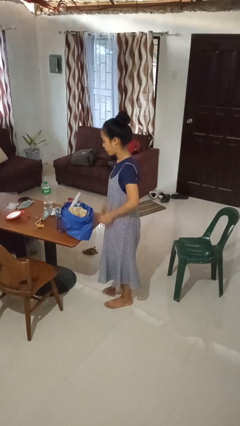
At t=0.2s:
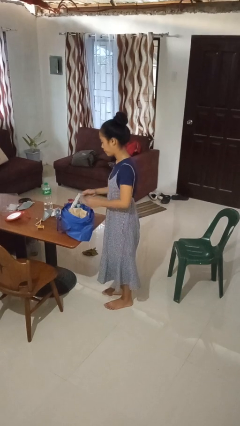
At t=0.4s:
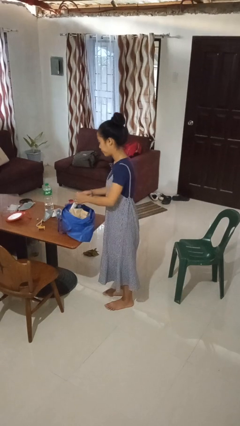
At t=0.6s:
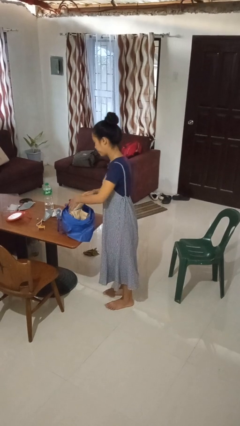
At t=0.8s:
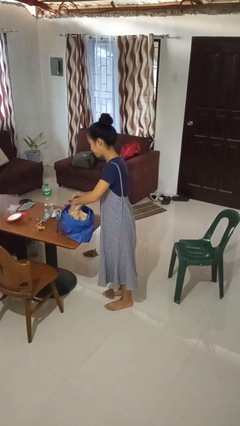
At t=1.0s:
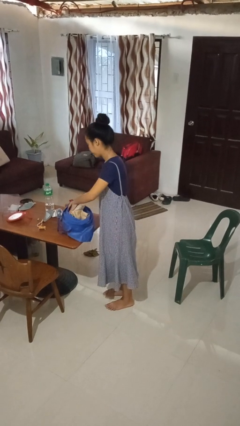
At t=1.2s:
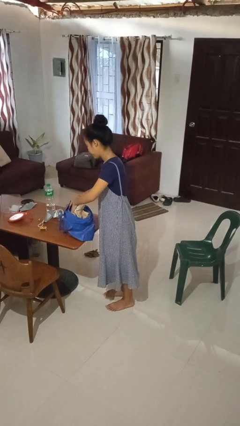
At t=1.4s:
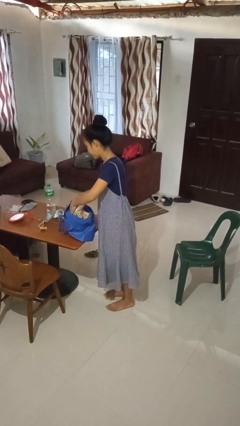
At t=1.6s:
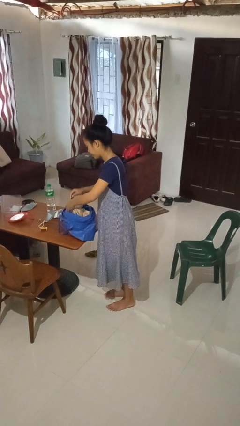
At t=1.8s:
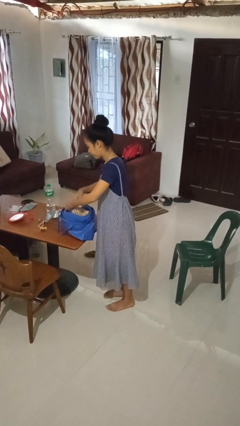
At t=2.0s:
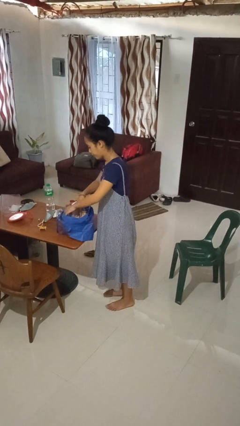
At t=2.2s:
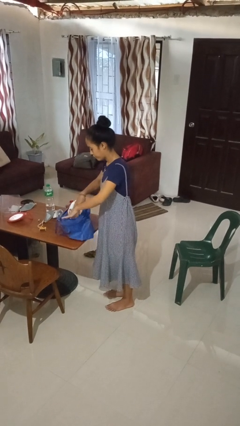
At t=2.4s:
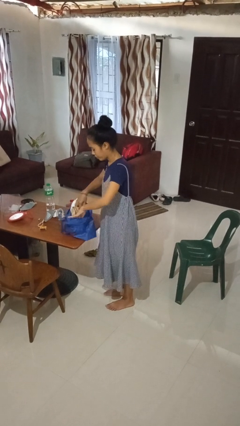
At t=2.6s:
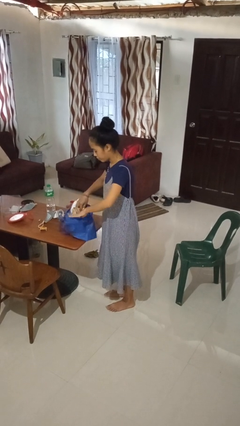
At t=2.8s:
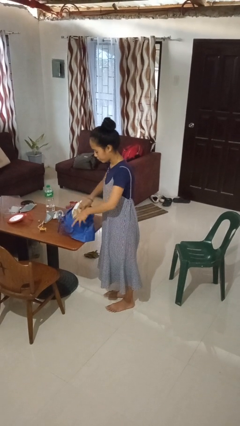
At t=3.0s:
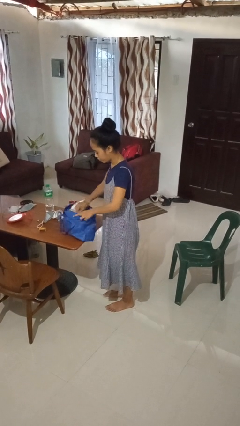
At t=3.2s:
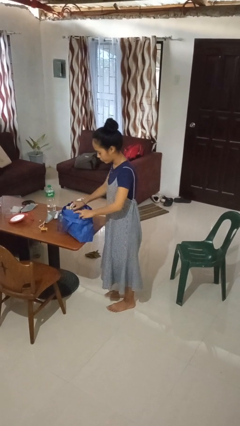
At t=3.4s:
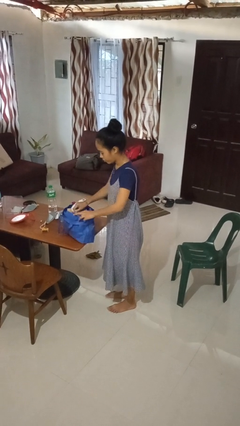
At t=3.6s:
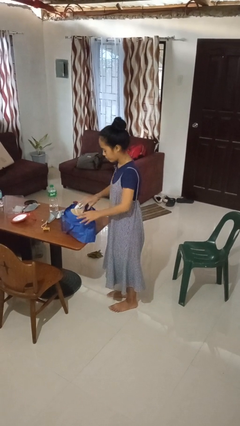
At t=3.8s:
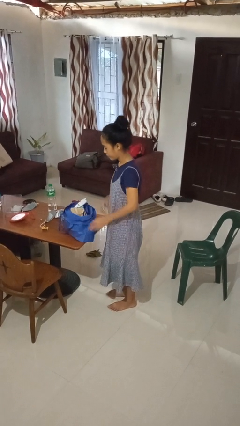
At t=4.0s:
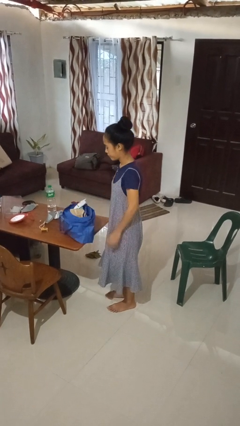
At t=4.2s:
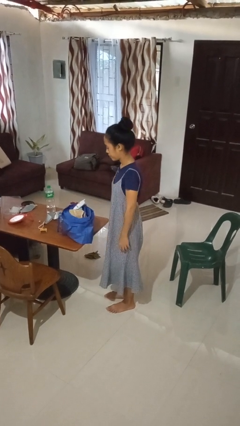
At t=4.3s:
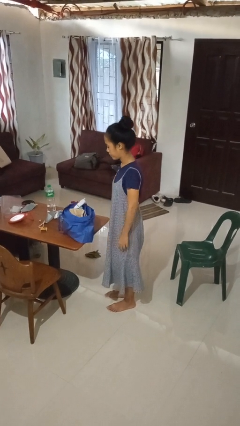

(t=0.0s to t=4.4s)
person searches in bag

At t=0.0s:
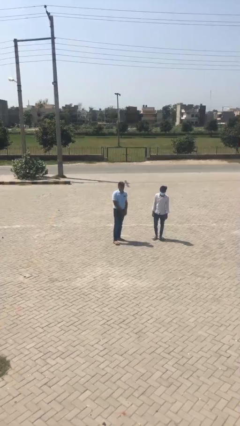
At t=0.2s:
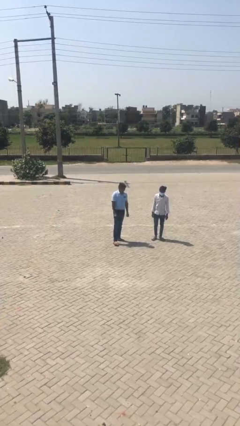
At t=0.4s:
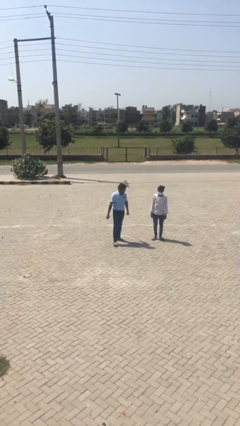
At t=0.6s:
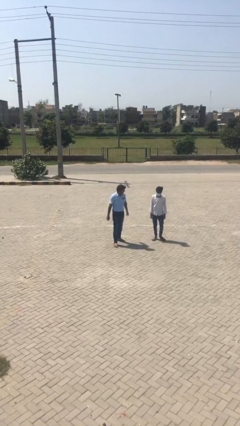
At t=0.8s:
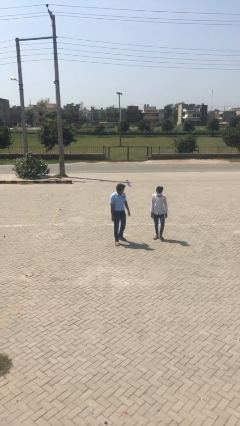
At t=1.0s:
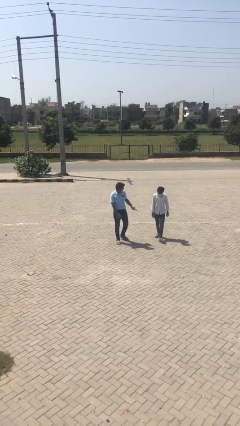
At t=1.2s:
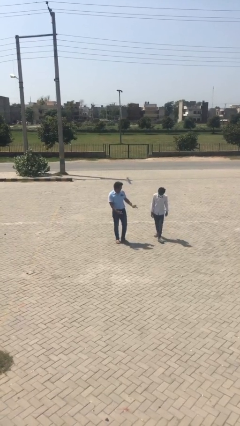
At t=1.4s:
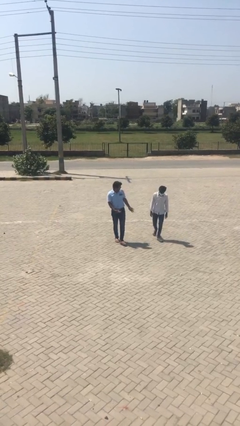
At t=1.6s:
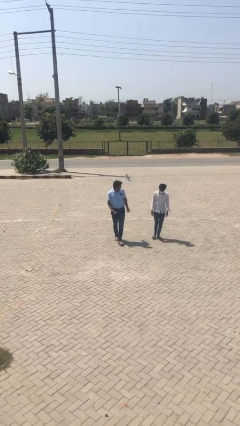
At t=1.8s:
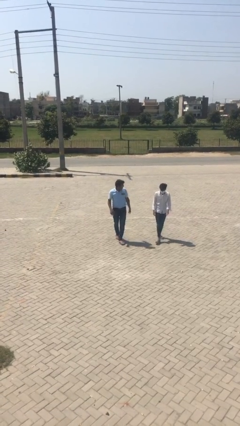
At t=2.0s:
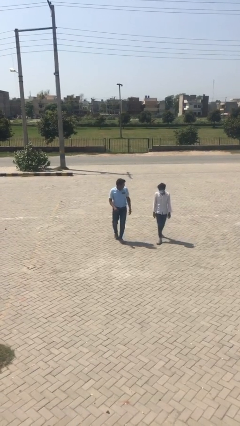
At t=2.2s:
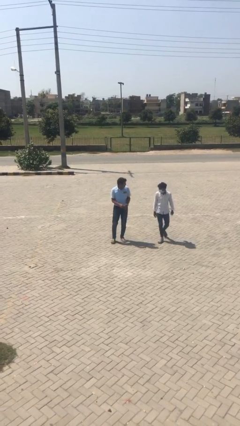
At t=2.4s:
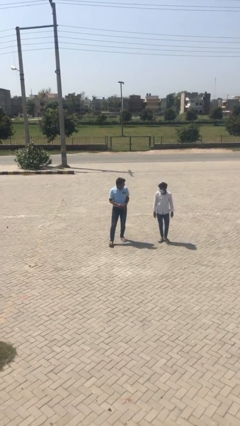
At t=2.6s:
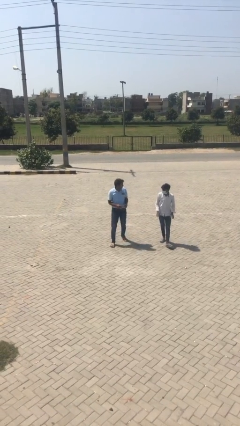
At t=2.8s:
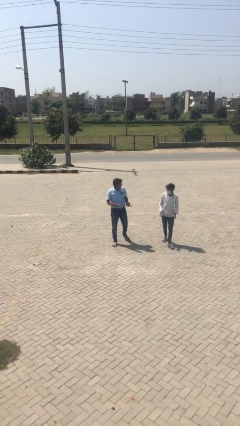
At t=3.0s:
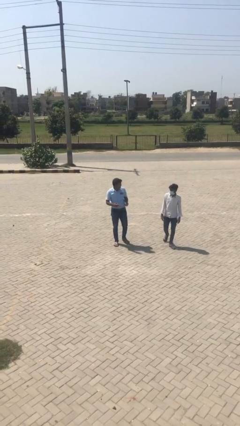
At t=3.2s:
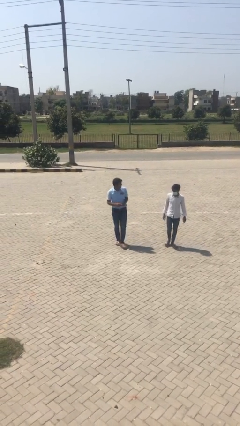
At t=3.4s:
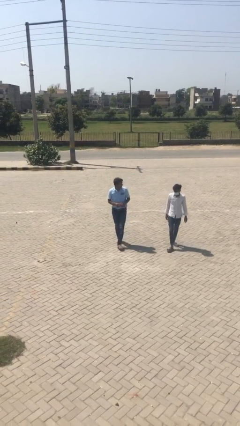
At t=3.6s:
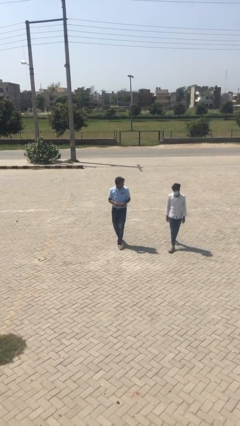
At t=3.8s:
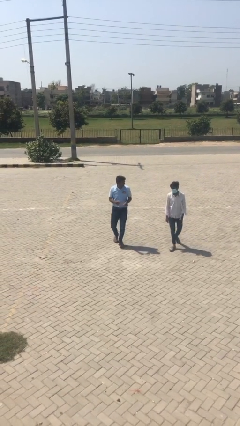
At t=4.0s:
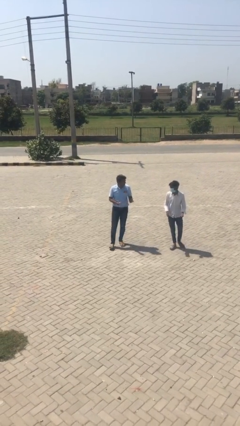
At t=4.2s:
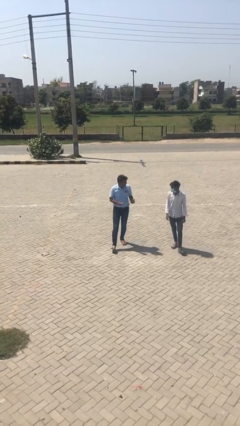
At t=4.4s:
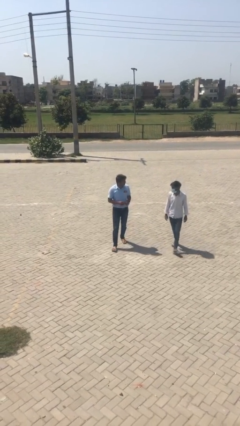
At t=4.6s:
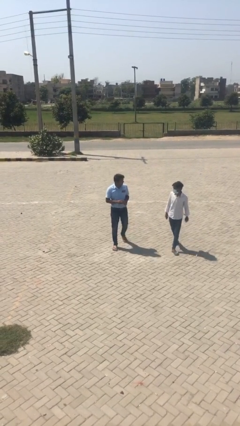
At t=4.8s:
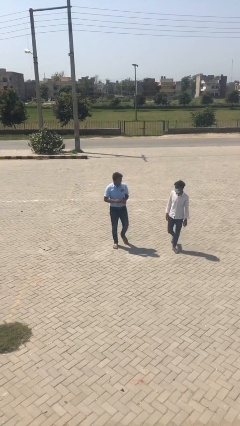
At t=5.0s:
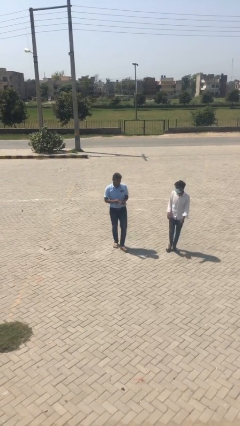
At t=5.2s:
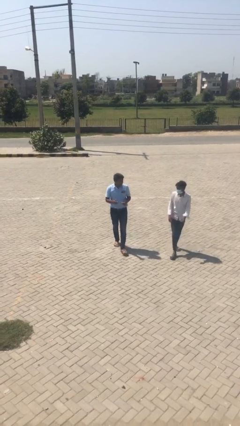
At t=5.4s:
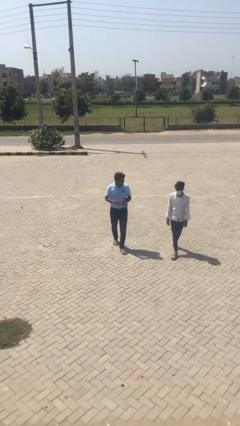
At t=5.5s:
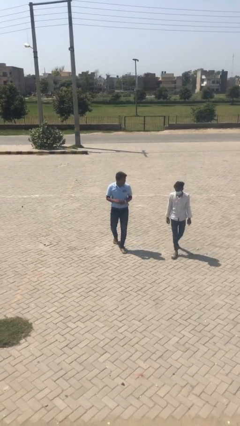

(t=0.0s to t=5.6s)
person talks to person

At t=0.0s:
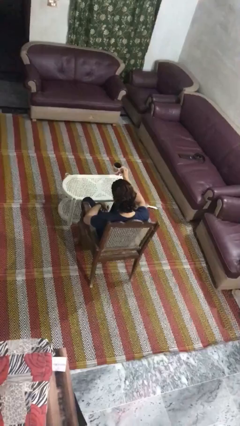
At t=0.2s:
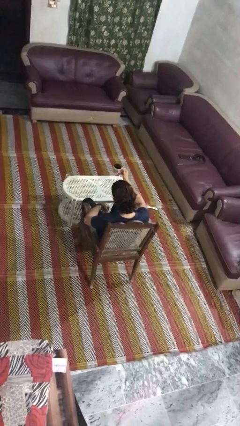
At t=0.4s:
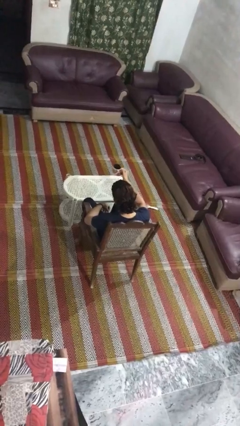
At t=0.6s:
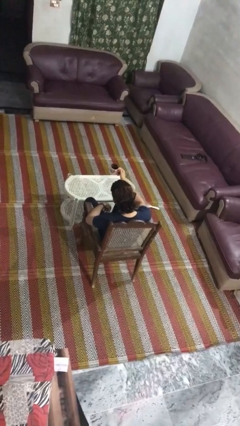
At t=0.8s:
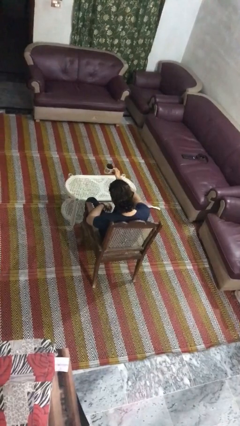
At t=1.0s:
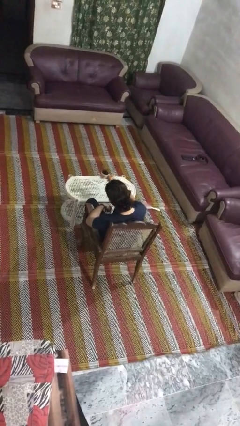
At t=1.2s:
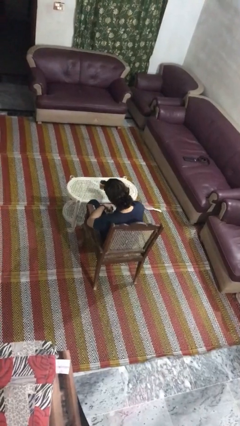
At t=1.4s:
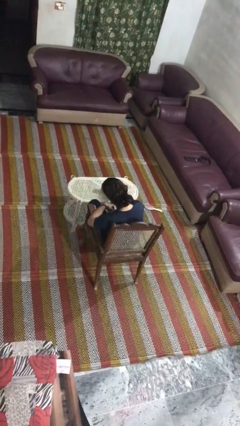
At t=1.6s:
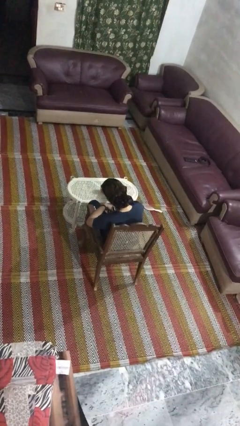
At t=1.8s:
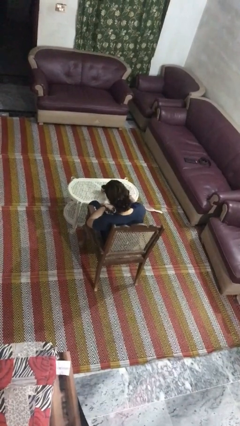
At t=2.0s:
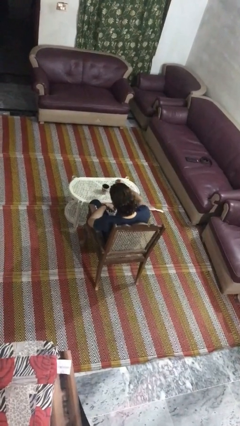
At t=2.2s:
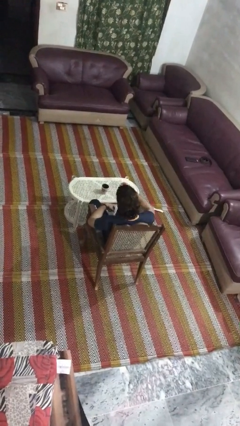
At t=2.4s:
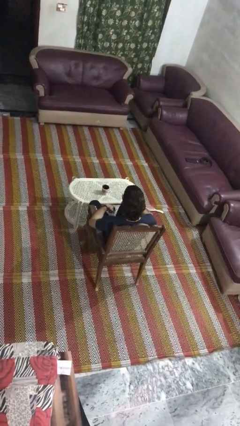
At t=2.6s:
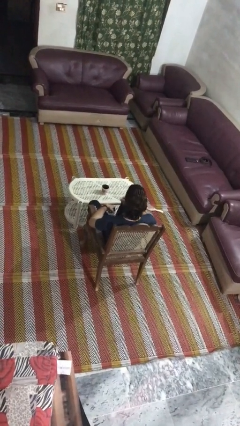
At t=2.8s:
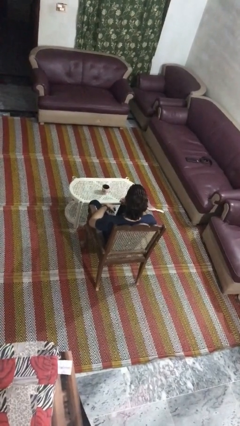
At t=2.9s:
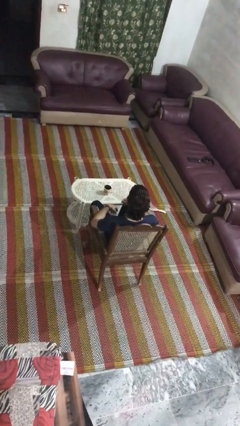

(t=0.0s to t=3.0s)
person puts down object on table

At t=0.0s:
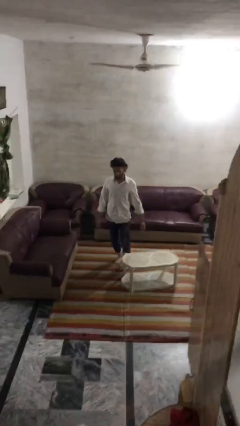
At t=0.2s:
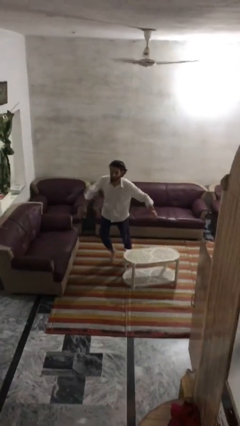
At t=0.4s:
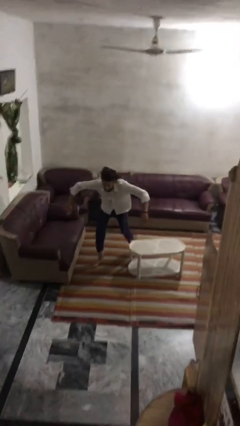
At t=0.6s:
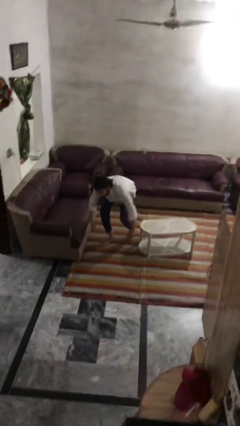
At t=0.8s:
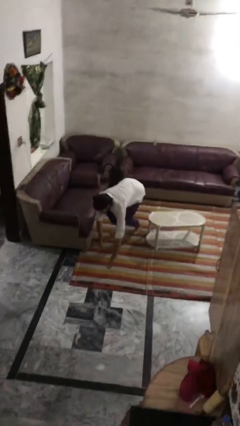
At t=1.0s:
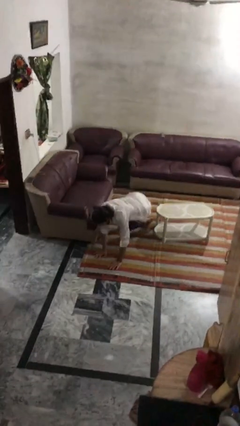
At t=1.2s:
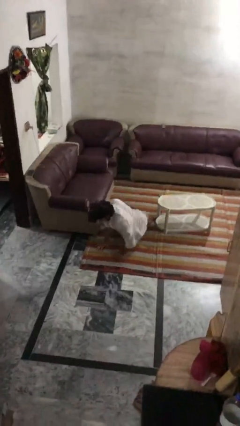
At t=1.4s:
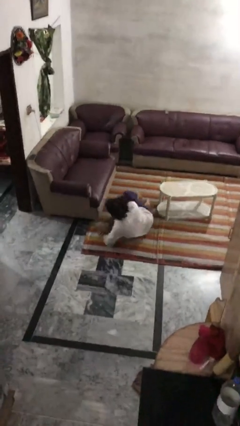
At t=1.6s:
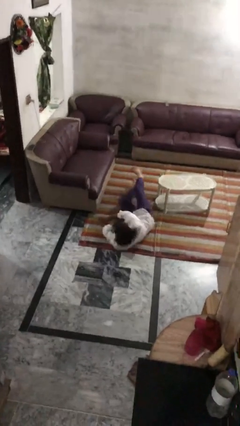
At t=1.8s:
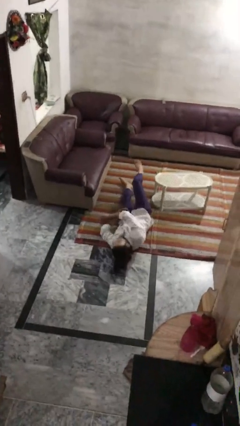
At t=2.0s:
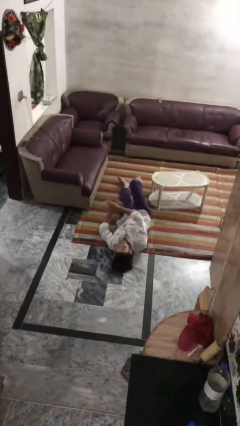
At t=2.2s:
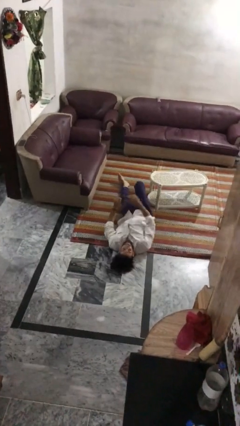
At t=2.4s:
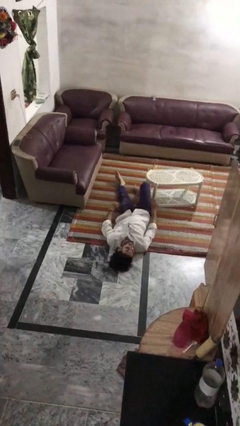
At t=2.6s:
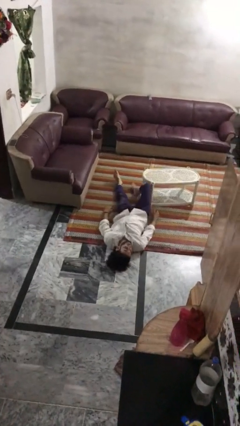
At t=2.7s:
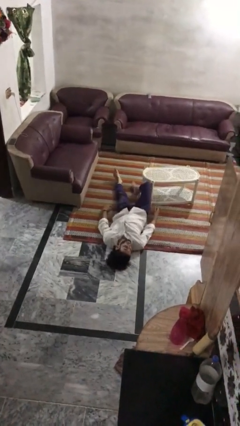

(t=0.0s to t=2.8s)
person trips on object on floor

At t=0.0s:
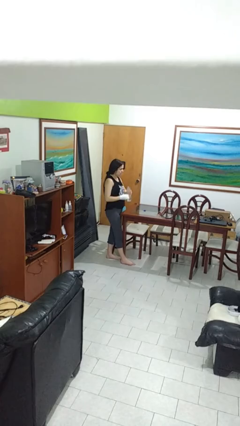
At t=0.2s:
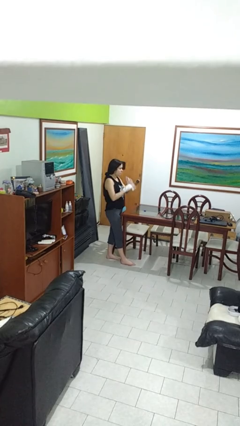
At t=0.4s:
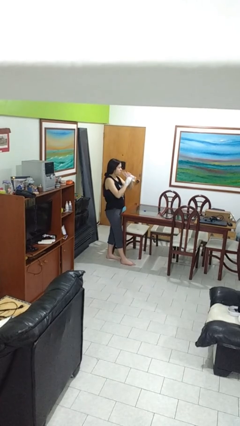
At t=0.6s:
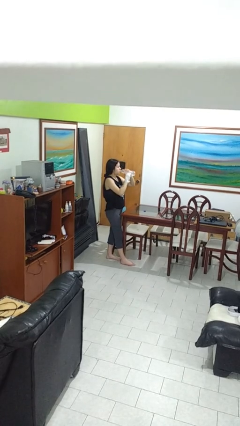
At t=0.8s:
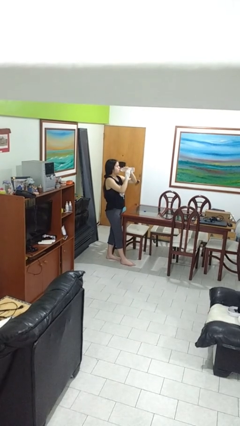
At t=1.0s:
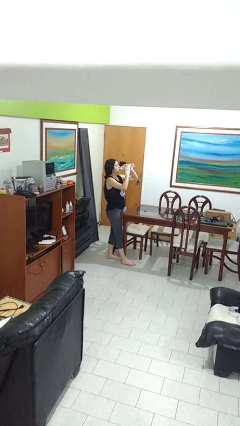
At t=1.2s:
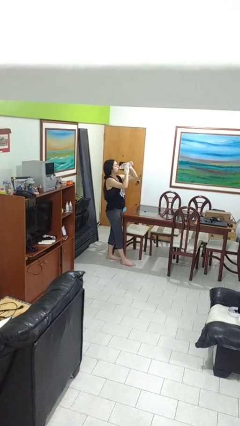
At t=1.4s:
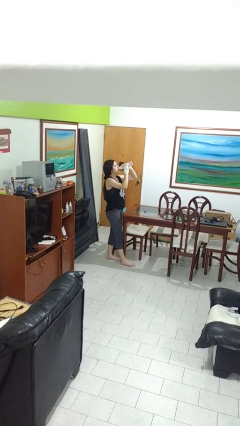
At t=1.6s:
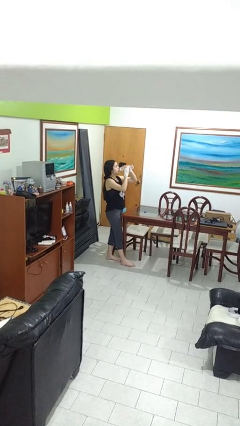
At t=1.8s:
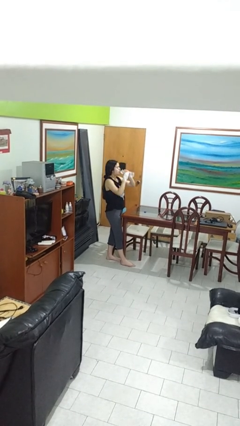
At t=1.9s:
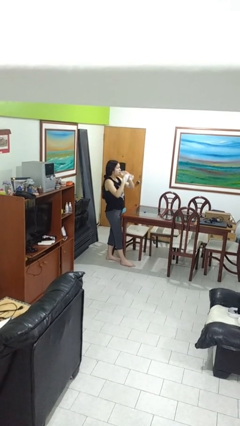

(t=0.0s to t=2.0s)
person drinks from bottle
